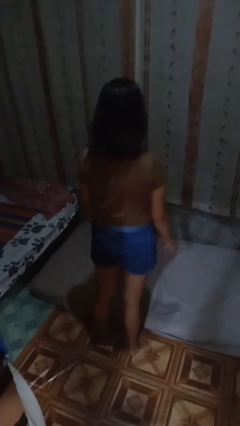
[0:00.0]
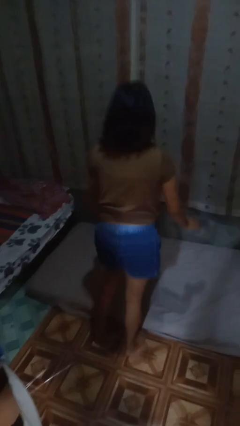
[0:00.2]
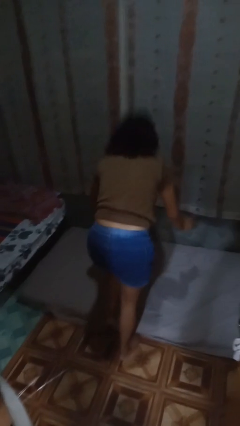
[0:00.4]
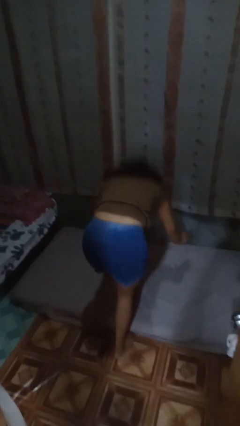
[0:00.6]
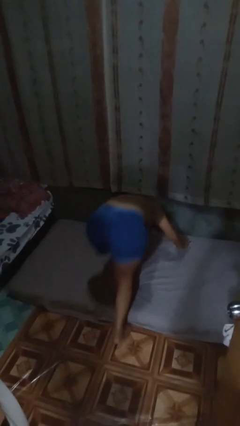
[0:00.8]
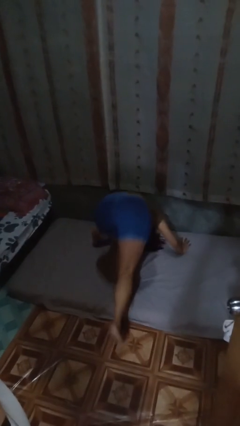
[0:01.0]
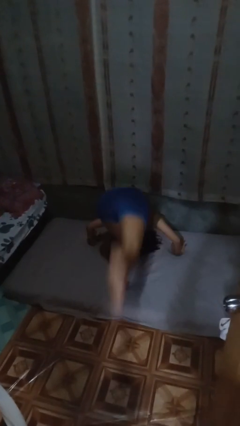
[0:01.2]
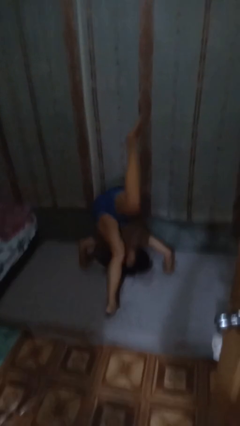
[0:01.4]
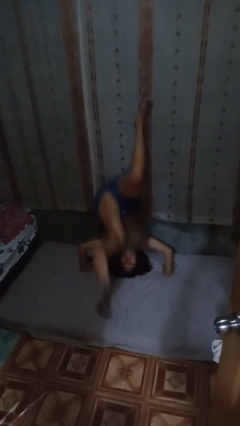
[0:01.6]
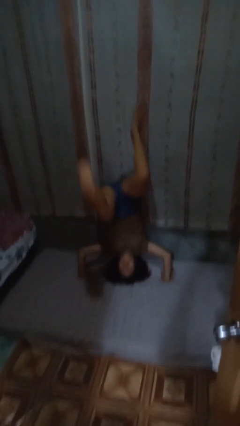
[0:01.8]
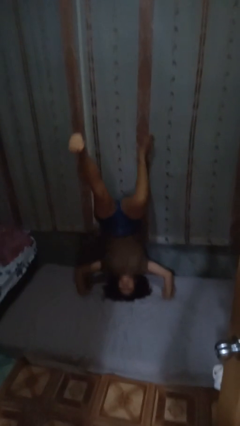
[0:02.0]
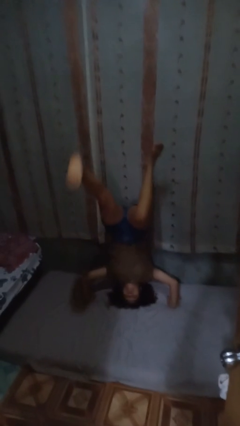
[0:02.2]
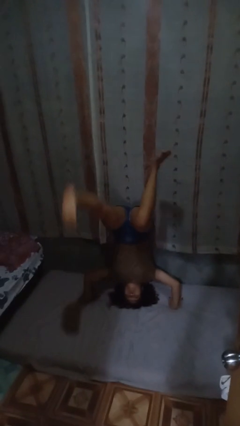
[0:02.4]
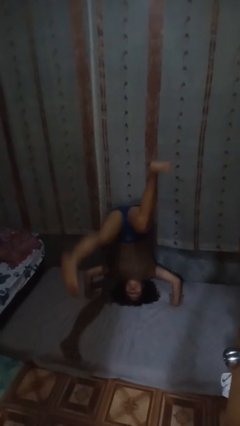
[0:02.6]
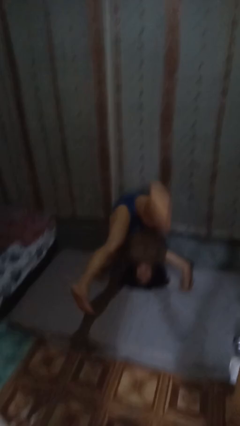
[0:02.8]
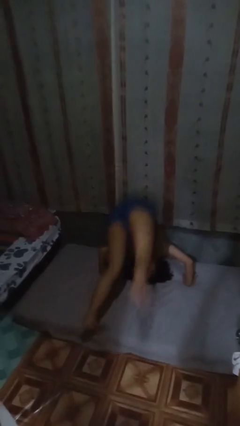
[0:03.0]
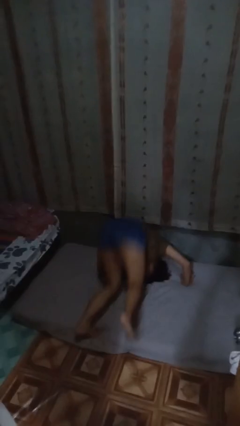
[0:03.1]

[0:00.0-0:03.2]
person handstand

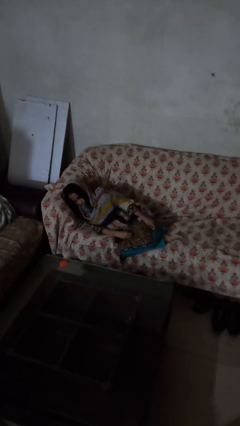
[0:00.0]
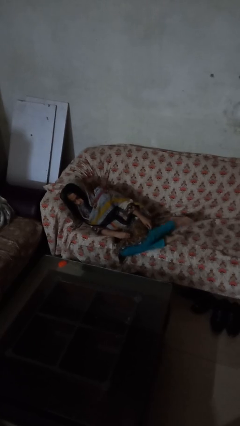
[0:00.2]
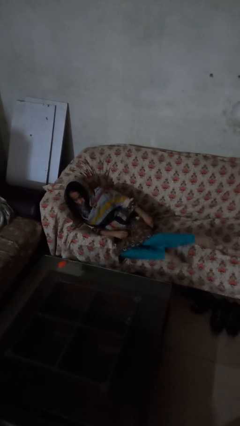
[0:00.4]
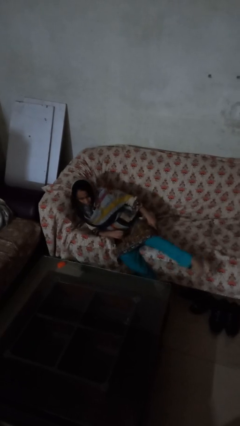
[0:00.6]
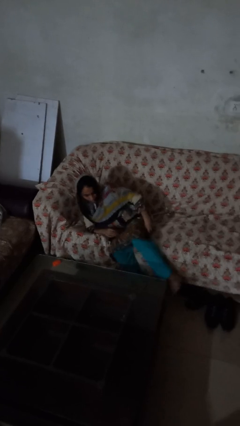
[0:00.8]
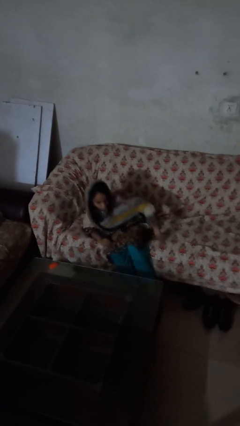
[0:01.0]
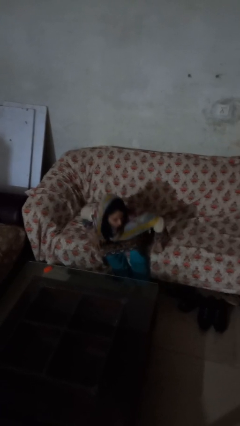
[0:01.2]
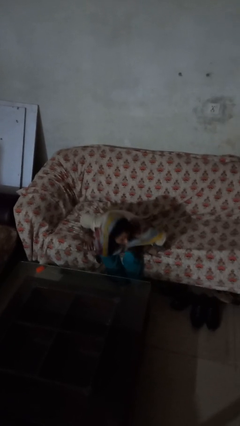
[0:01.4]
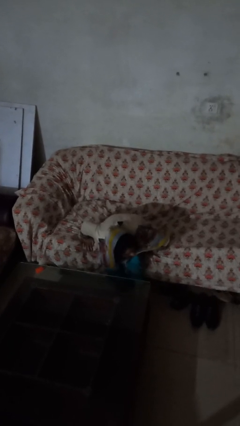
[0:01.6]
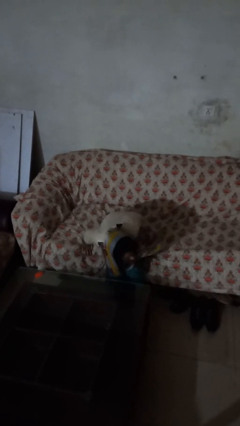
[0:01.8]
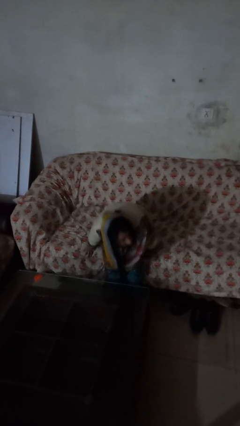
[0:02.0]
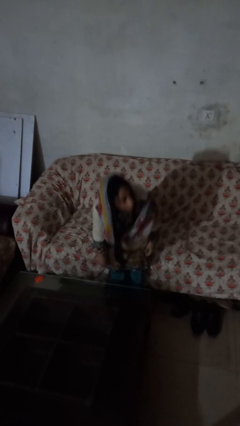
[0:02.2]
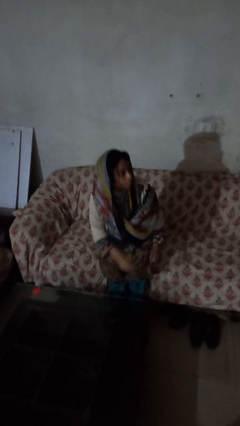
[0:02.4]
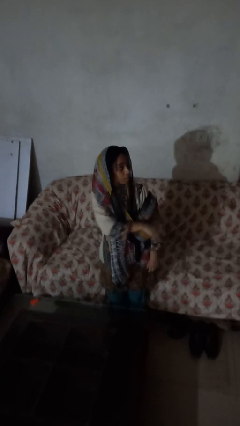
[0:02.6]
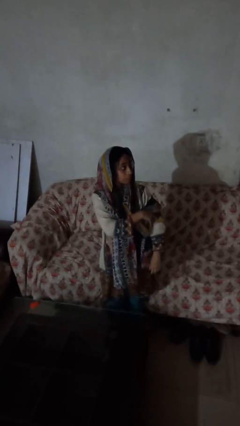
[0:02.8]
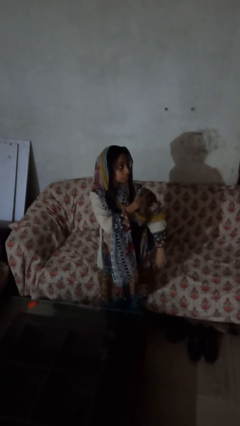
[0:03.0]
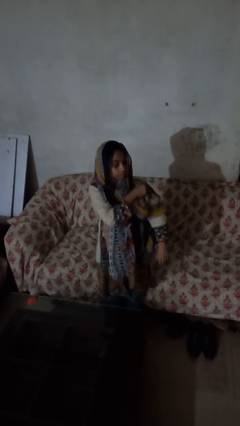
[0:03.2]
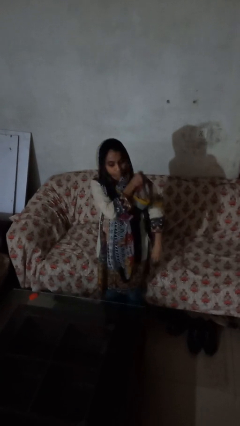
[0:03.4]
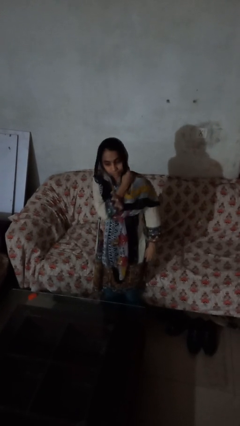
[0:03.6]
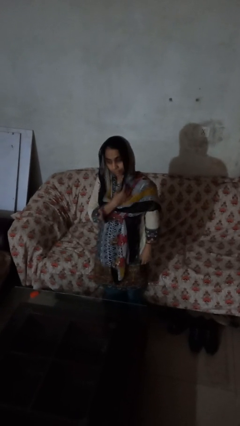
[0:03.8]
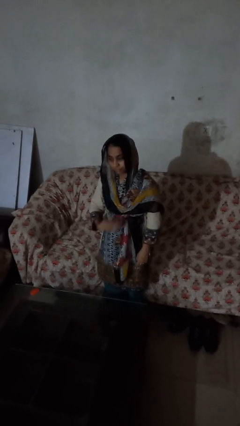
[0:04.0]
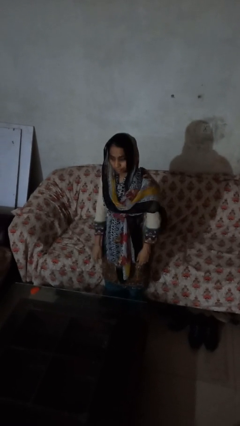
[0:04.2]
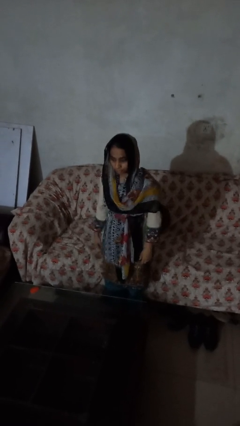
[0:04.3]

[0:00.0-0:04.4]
person stands up

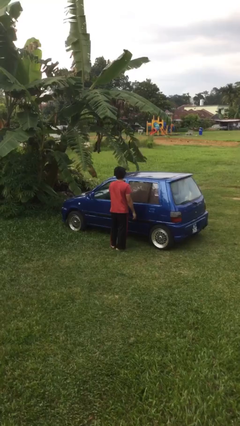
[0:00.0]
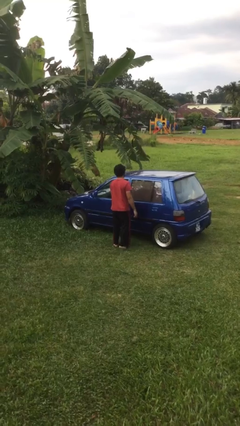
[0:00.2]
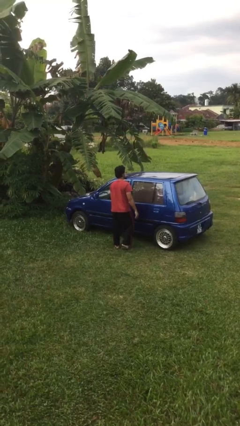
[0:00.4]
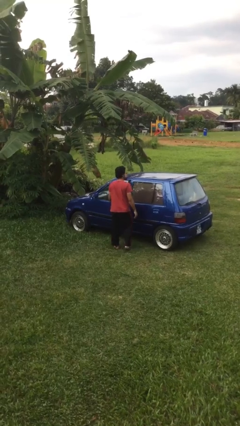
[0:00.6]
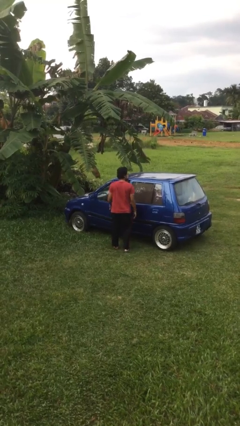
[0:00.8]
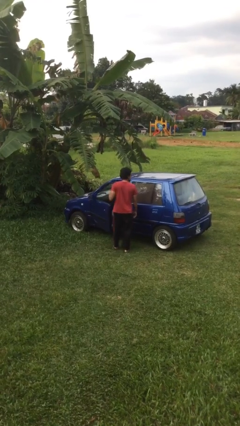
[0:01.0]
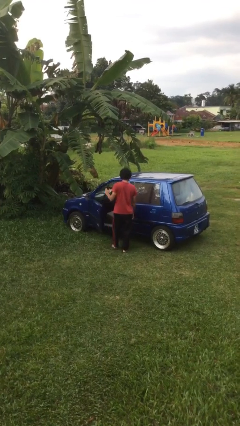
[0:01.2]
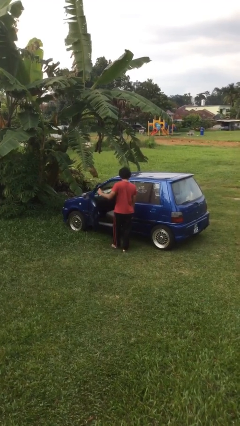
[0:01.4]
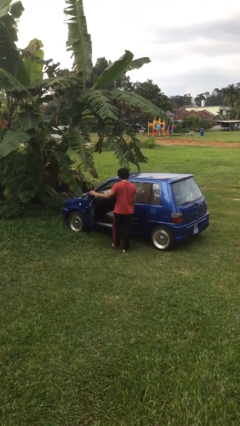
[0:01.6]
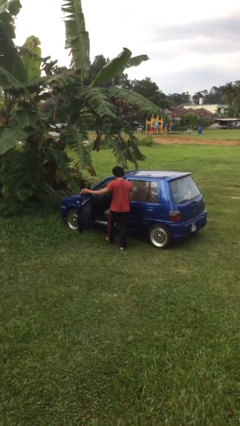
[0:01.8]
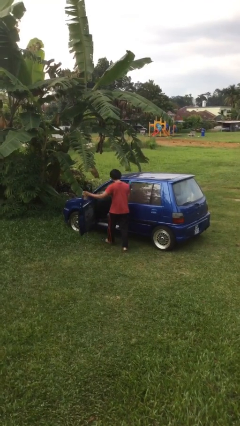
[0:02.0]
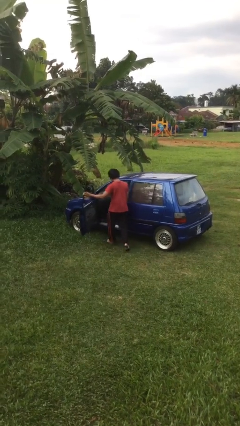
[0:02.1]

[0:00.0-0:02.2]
person opens car door

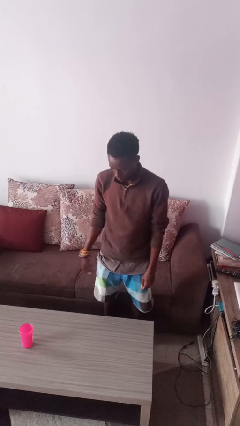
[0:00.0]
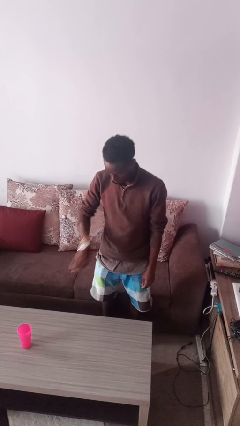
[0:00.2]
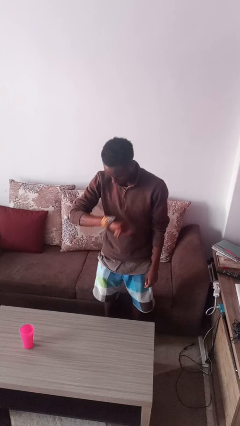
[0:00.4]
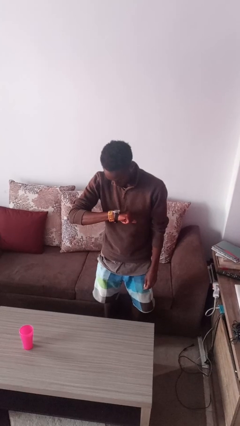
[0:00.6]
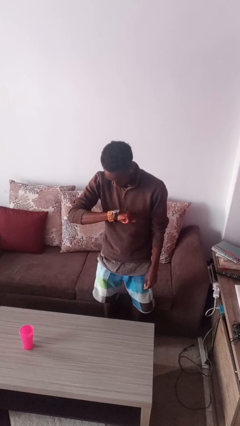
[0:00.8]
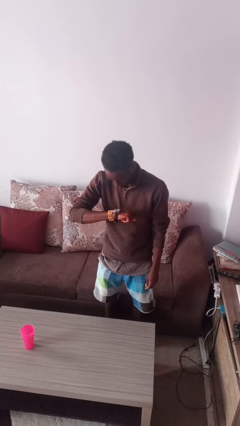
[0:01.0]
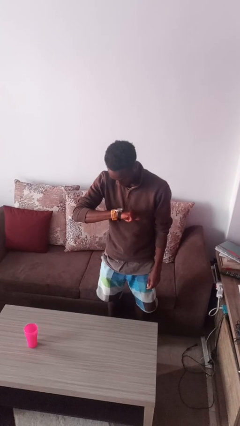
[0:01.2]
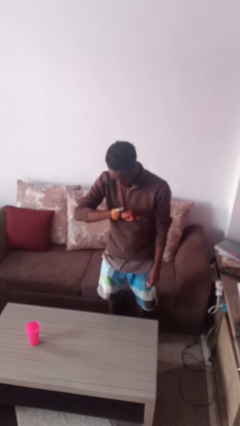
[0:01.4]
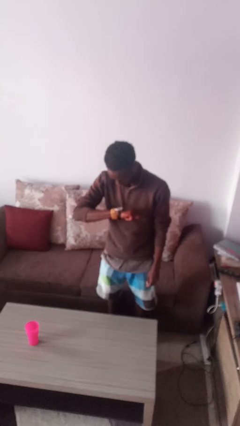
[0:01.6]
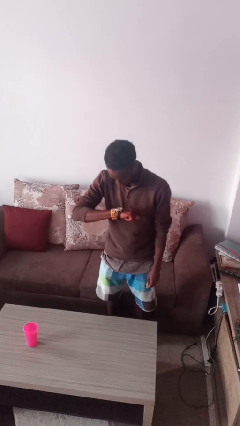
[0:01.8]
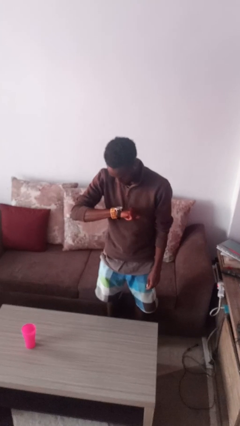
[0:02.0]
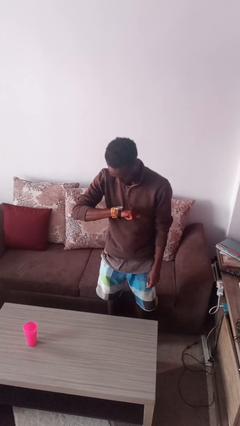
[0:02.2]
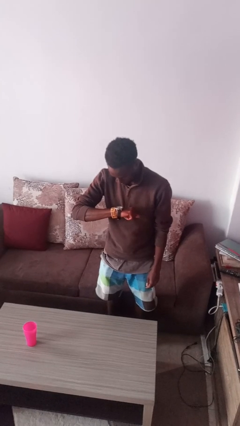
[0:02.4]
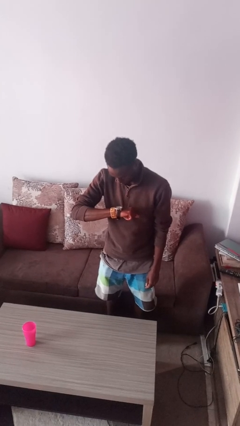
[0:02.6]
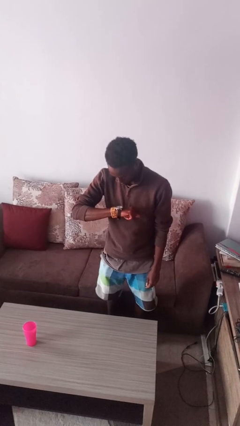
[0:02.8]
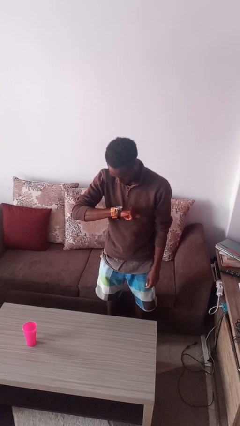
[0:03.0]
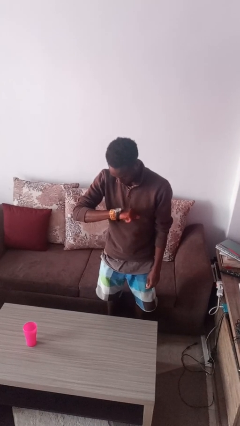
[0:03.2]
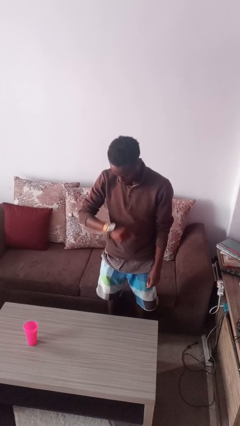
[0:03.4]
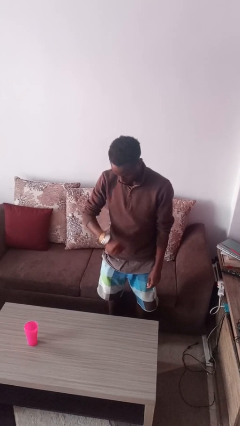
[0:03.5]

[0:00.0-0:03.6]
person looks at wristwatch

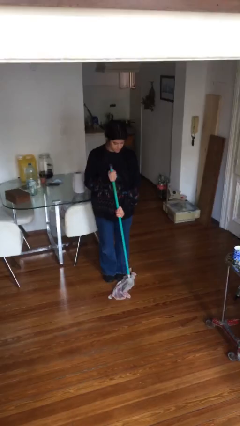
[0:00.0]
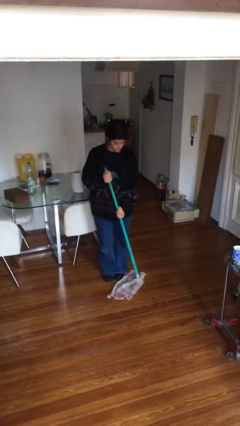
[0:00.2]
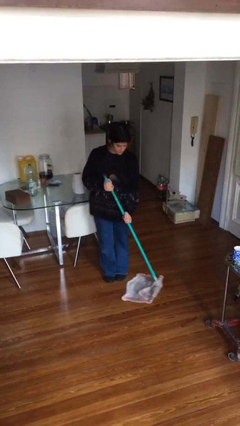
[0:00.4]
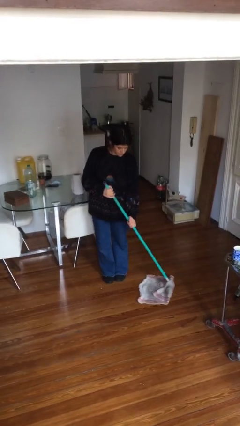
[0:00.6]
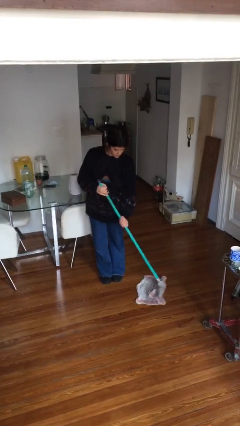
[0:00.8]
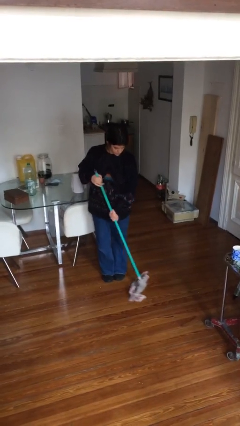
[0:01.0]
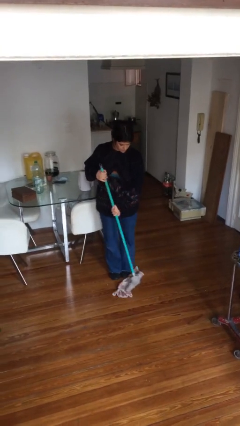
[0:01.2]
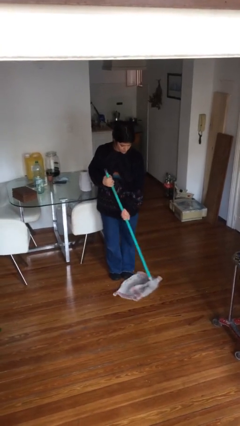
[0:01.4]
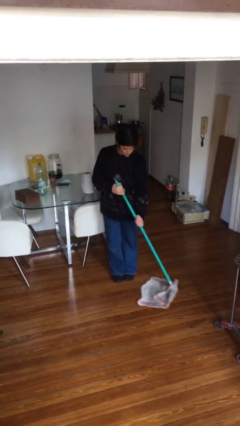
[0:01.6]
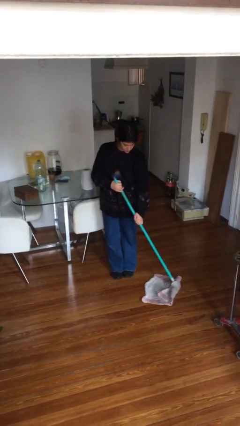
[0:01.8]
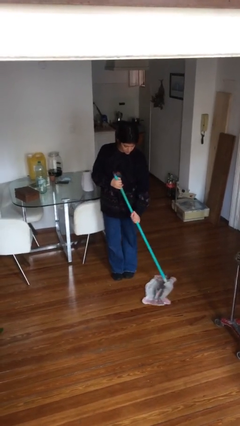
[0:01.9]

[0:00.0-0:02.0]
person mops

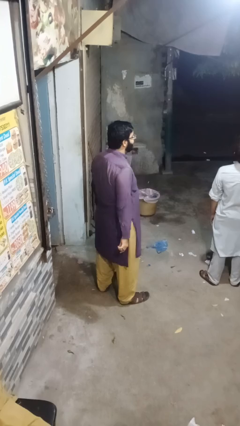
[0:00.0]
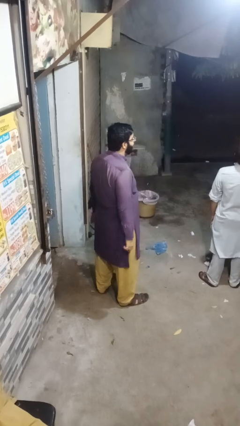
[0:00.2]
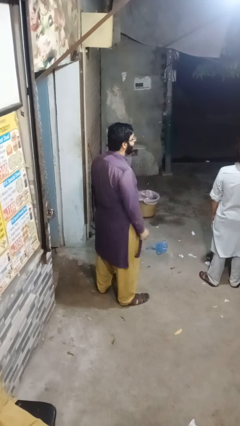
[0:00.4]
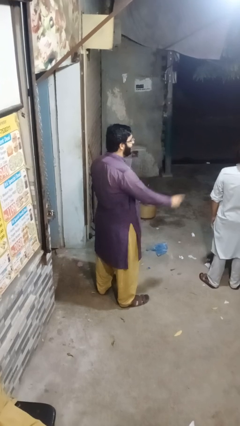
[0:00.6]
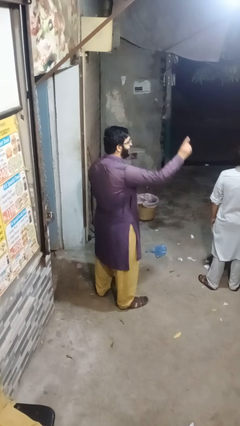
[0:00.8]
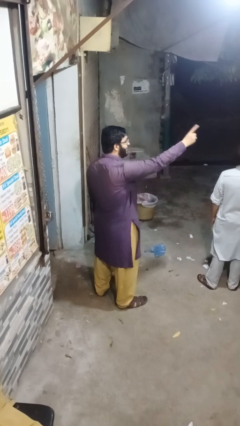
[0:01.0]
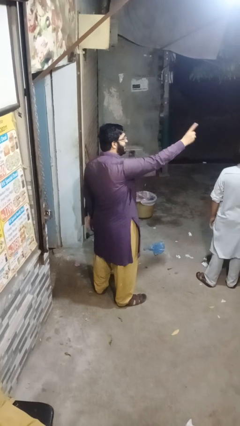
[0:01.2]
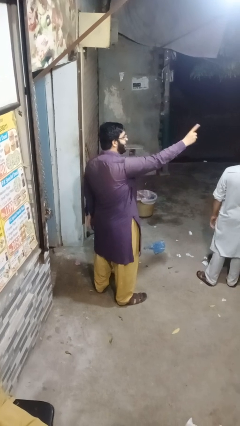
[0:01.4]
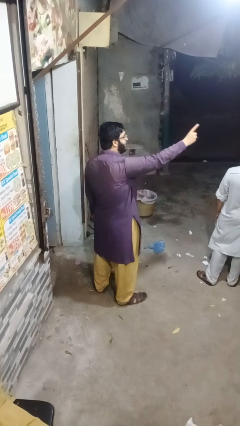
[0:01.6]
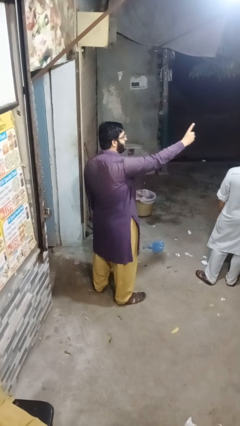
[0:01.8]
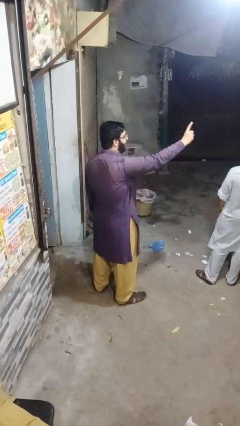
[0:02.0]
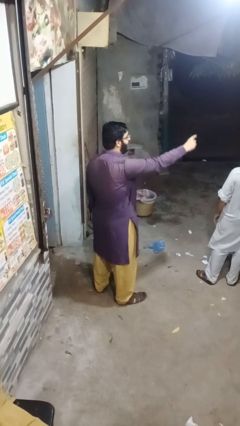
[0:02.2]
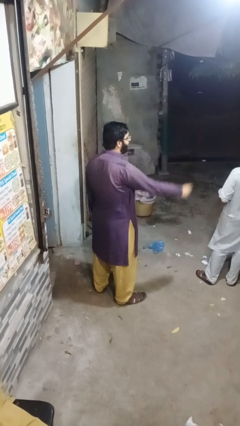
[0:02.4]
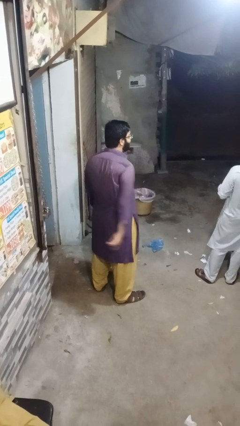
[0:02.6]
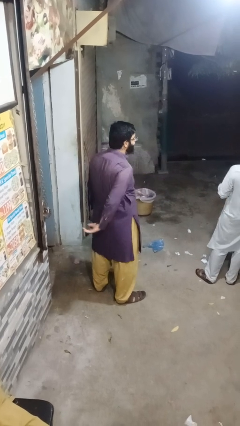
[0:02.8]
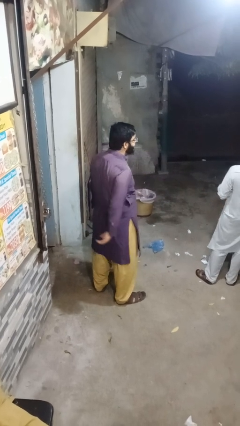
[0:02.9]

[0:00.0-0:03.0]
person points at person
